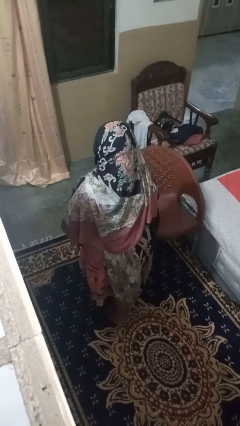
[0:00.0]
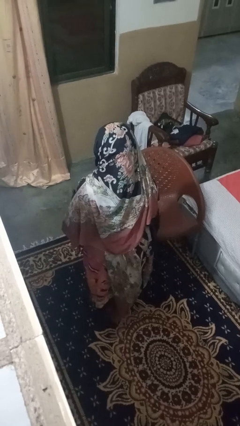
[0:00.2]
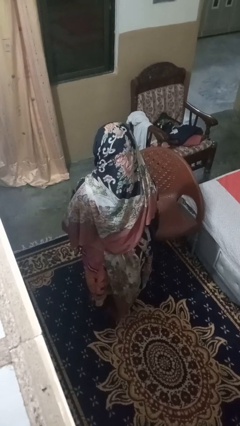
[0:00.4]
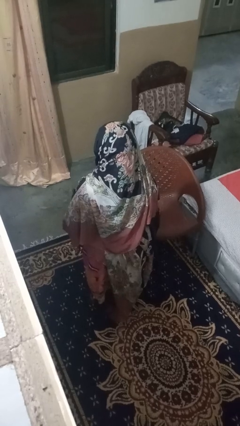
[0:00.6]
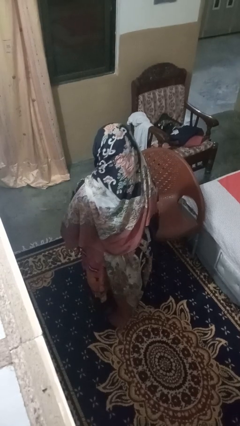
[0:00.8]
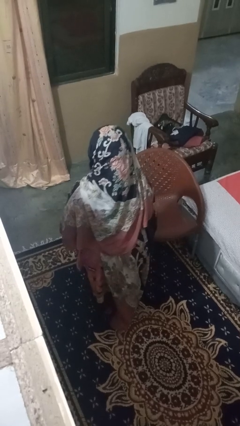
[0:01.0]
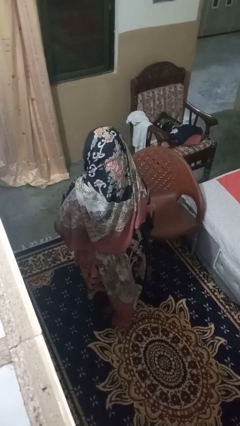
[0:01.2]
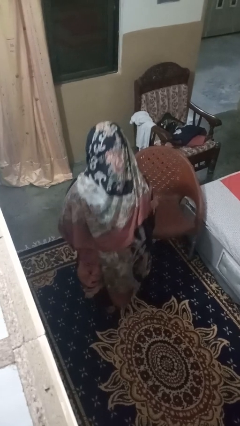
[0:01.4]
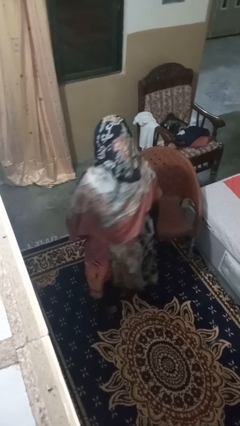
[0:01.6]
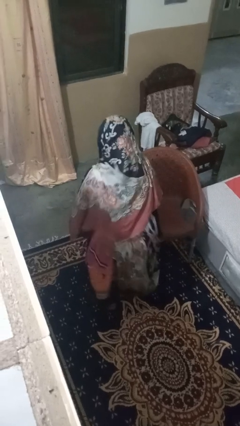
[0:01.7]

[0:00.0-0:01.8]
person trips on object on floor

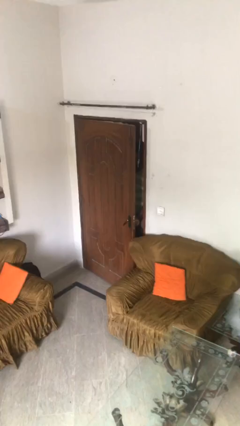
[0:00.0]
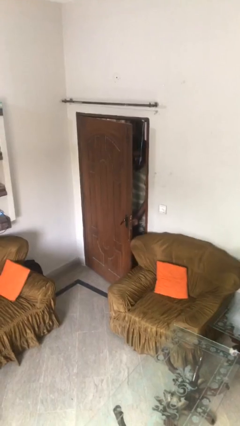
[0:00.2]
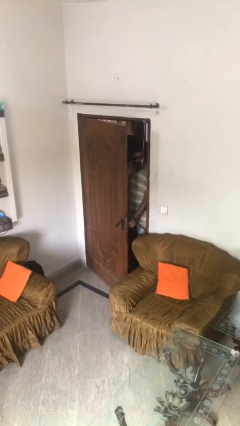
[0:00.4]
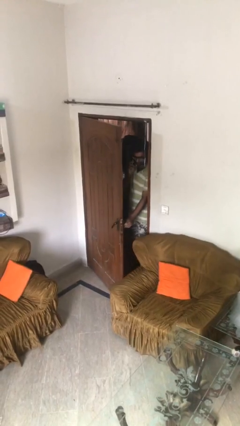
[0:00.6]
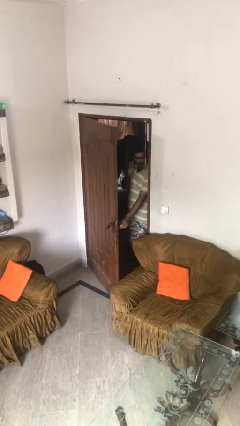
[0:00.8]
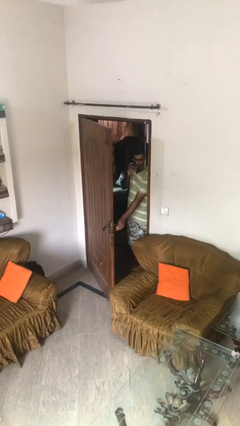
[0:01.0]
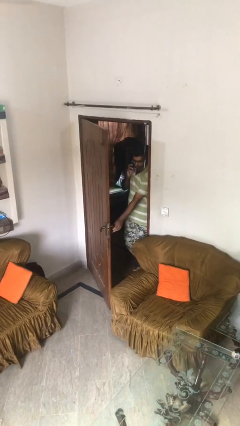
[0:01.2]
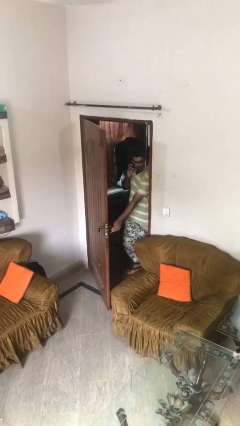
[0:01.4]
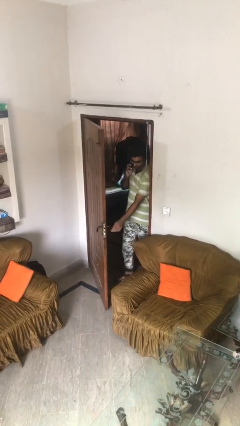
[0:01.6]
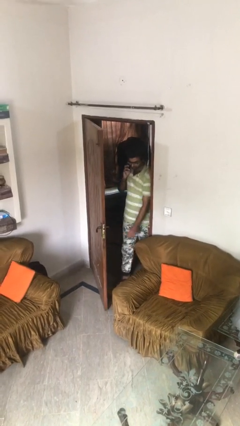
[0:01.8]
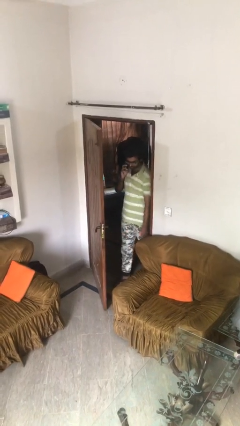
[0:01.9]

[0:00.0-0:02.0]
person opens facility door

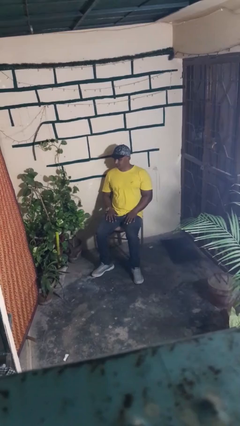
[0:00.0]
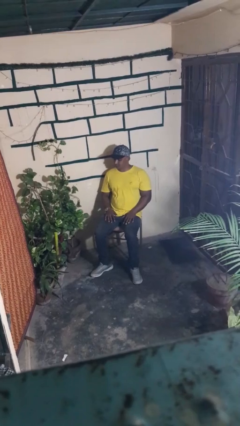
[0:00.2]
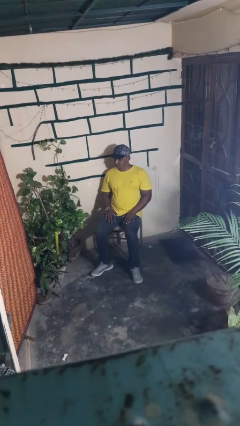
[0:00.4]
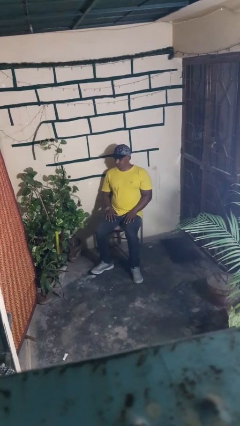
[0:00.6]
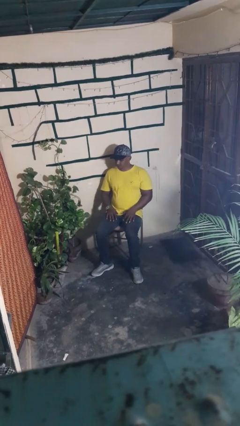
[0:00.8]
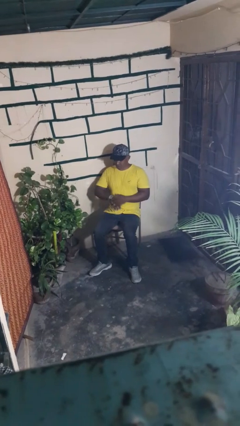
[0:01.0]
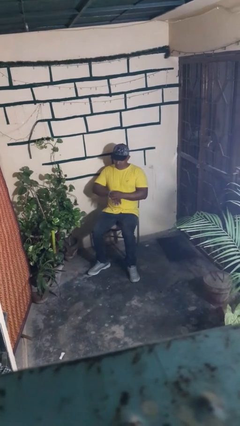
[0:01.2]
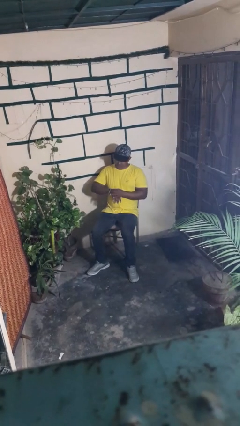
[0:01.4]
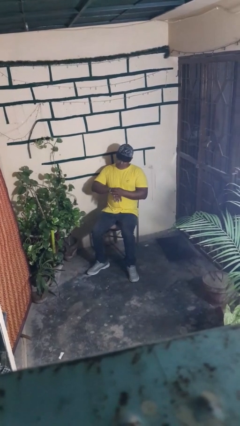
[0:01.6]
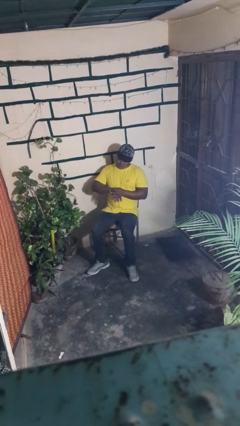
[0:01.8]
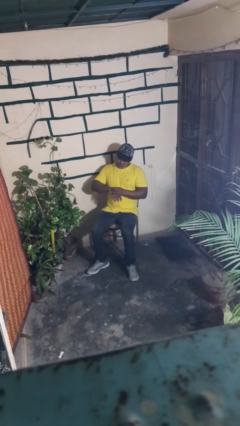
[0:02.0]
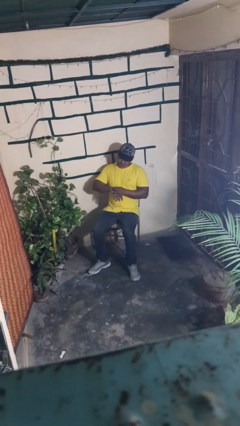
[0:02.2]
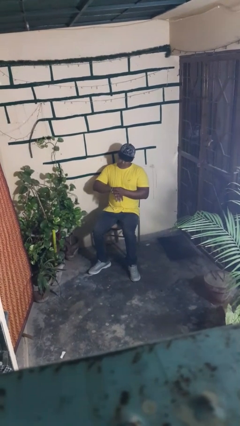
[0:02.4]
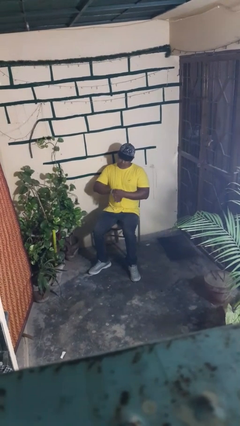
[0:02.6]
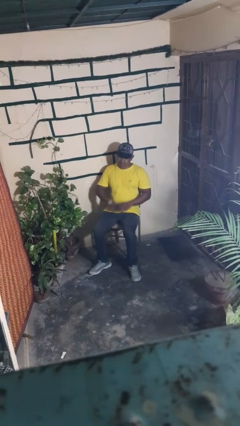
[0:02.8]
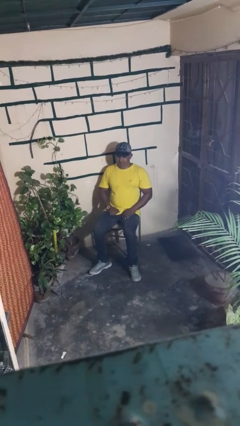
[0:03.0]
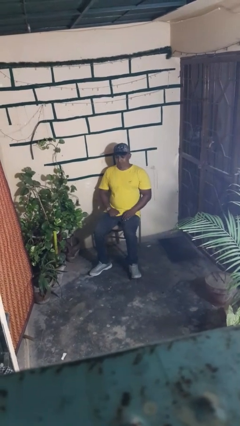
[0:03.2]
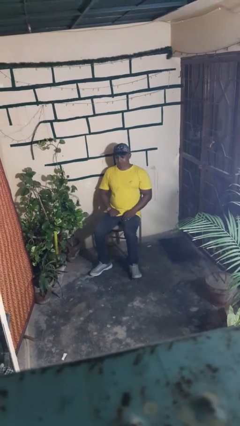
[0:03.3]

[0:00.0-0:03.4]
person looks at wristwatch

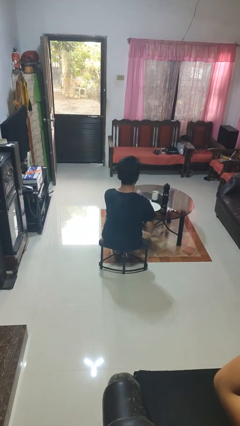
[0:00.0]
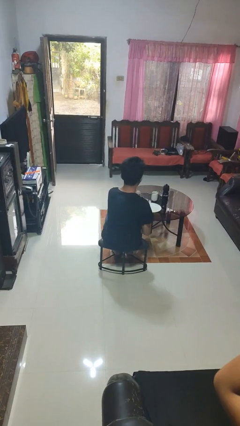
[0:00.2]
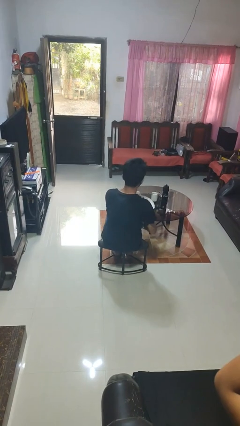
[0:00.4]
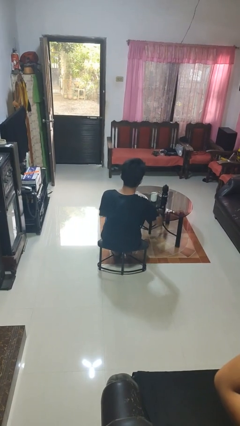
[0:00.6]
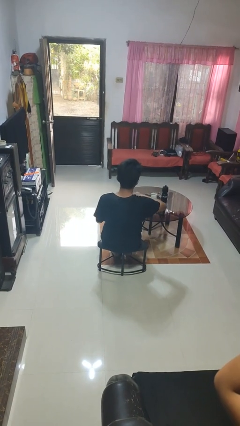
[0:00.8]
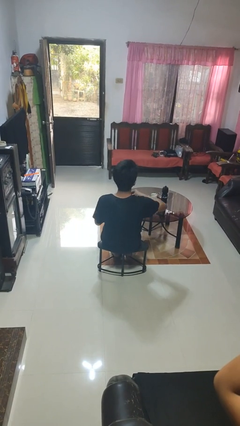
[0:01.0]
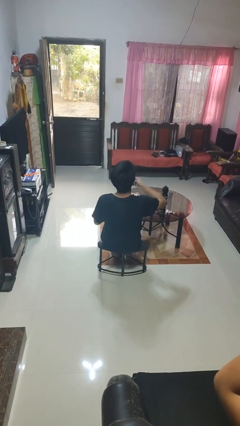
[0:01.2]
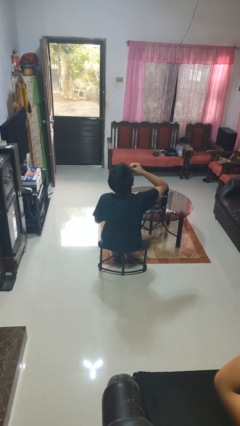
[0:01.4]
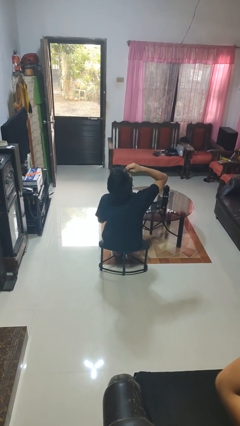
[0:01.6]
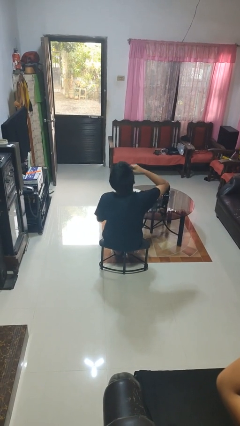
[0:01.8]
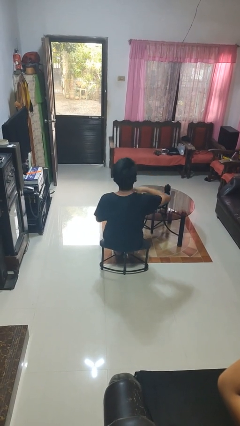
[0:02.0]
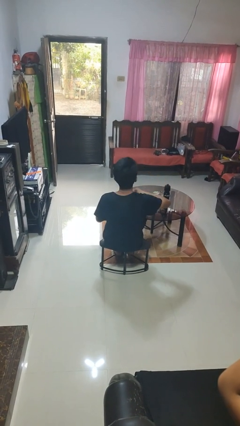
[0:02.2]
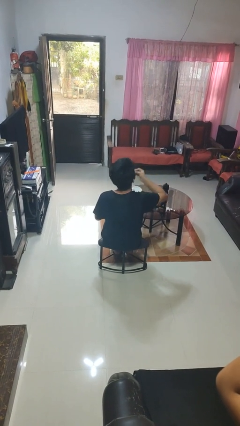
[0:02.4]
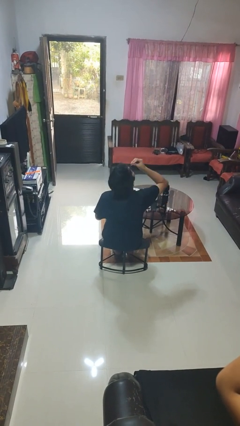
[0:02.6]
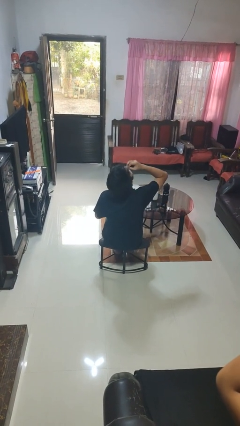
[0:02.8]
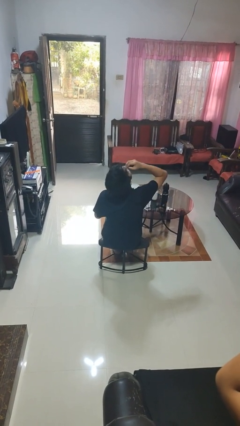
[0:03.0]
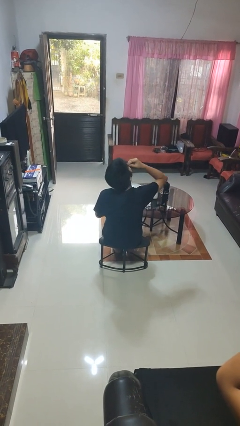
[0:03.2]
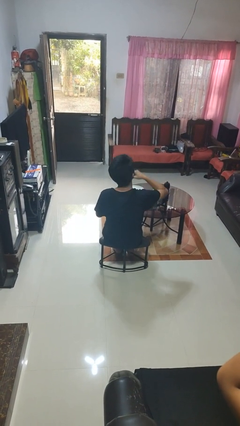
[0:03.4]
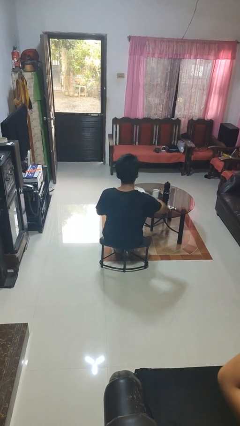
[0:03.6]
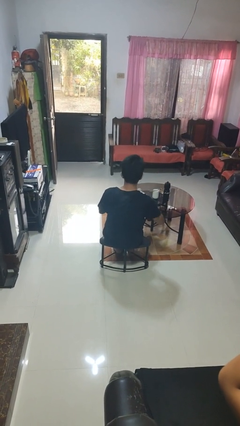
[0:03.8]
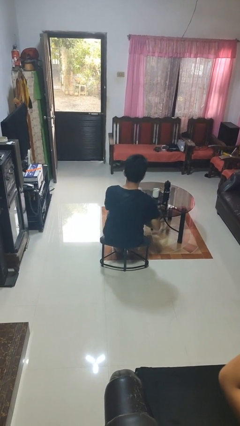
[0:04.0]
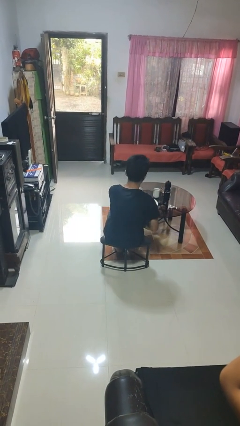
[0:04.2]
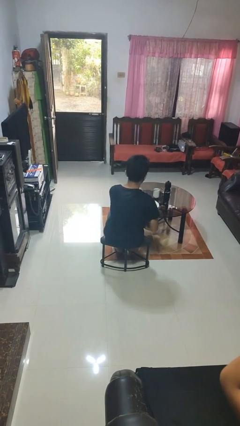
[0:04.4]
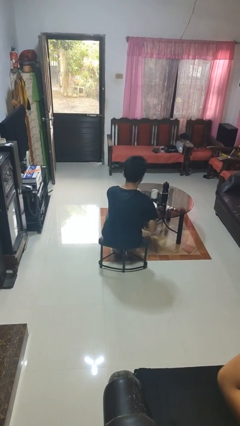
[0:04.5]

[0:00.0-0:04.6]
person eats with hands

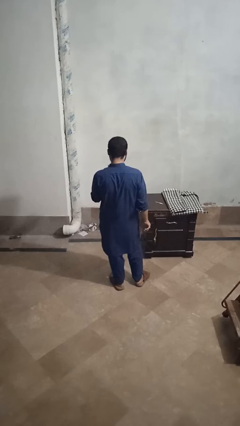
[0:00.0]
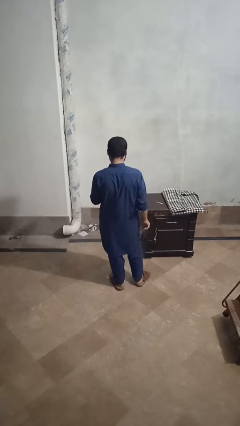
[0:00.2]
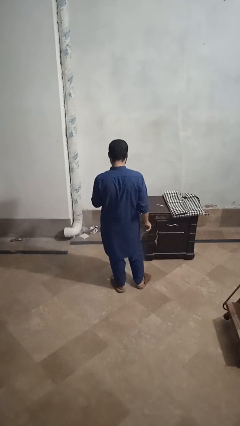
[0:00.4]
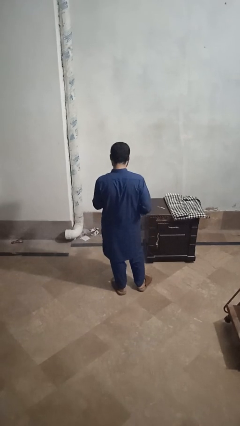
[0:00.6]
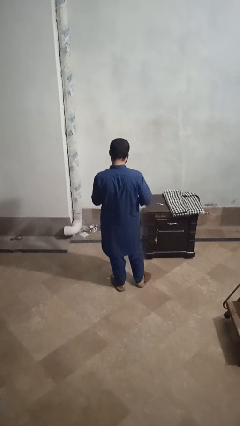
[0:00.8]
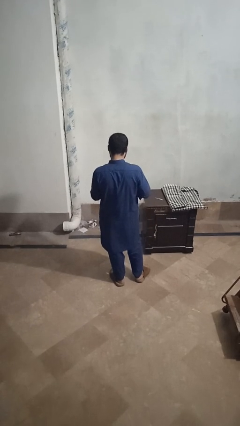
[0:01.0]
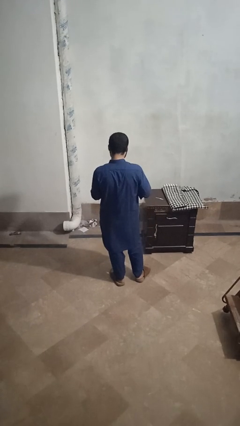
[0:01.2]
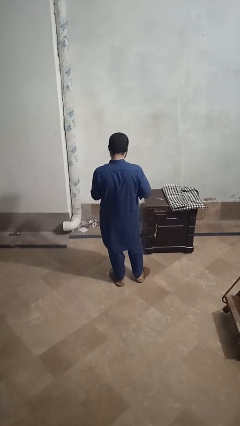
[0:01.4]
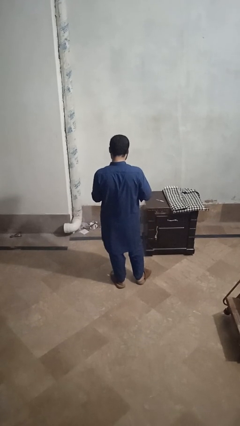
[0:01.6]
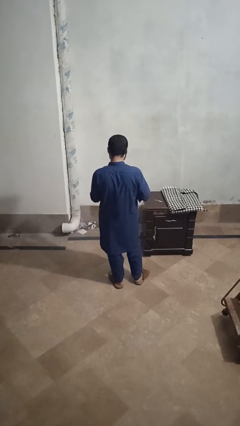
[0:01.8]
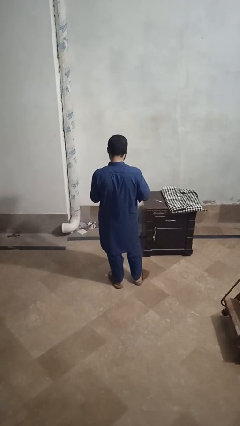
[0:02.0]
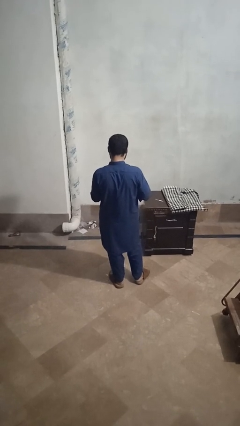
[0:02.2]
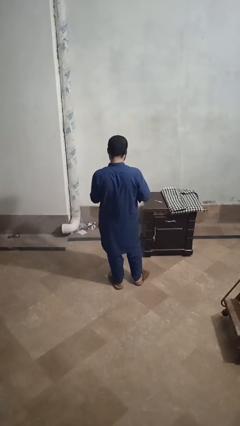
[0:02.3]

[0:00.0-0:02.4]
person files fingernails

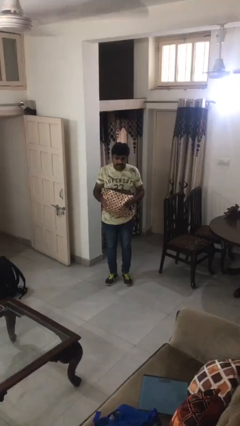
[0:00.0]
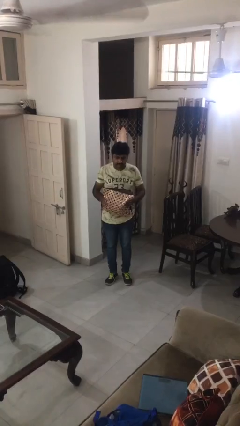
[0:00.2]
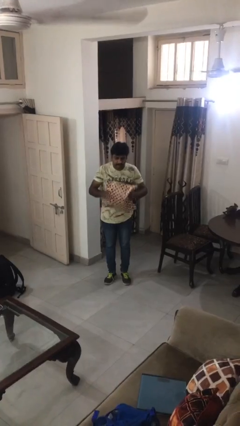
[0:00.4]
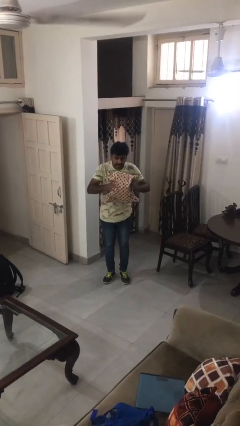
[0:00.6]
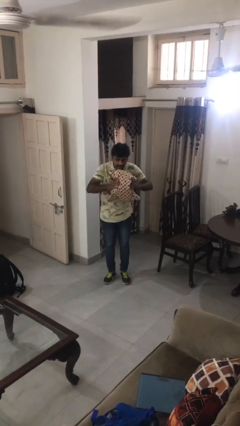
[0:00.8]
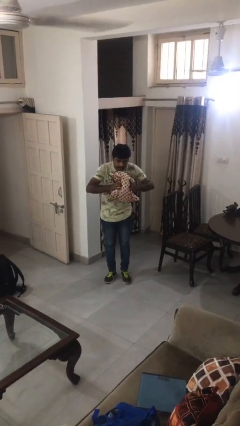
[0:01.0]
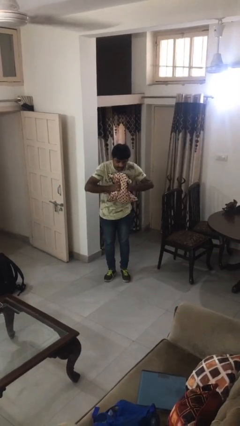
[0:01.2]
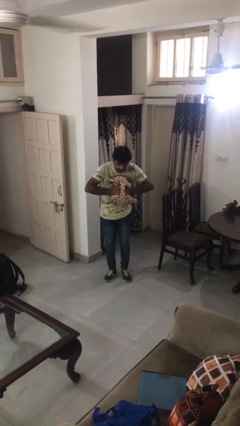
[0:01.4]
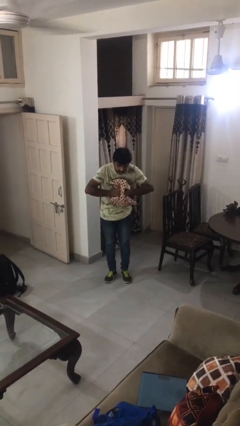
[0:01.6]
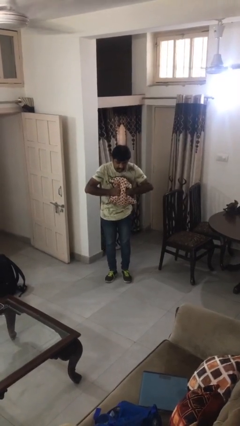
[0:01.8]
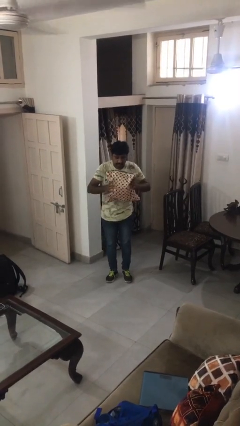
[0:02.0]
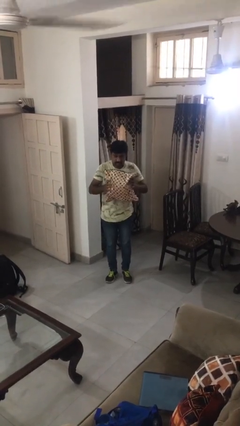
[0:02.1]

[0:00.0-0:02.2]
person squeezes object

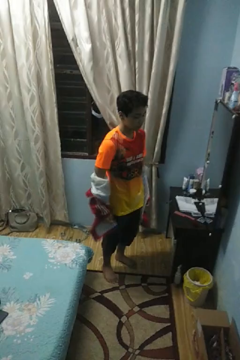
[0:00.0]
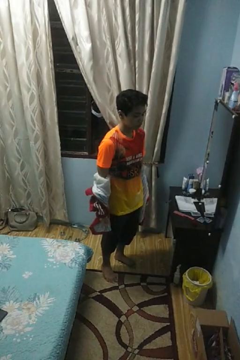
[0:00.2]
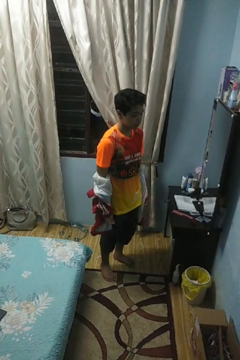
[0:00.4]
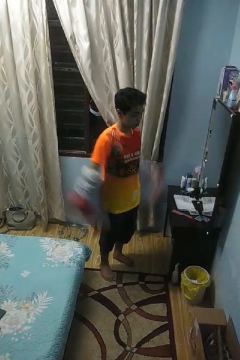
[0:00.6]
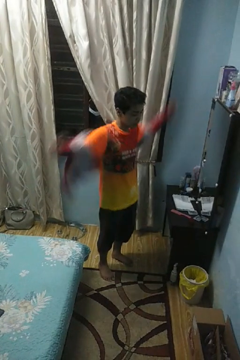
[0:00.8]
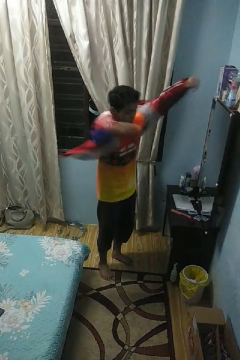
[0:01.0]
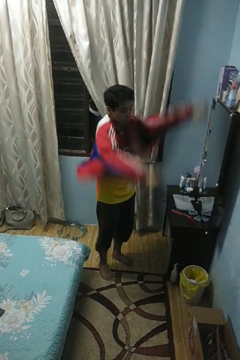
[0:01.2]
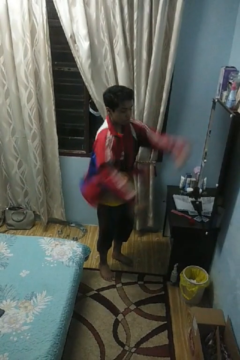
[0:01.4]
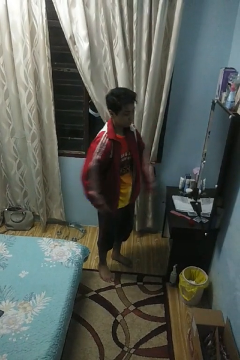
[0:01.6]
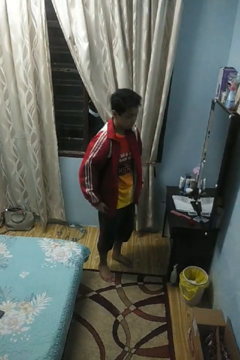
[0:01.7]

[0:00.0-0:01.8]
person puts on jacket
